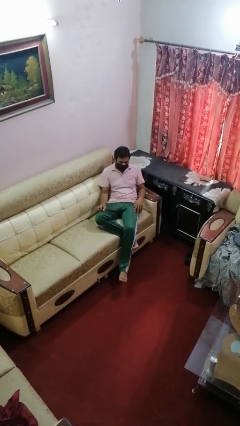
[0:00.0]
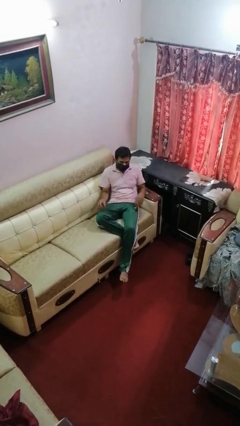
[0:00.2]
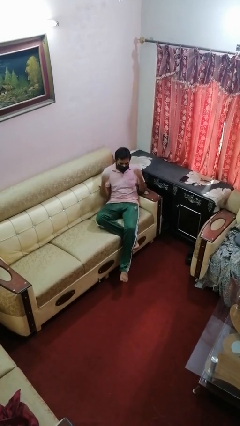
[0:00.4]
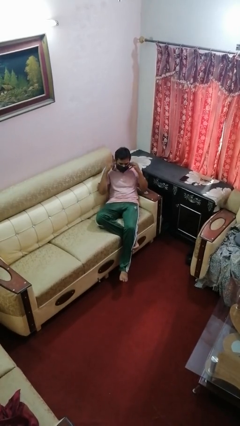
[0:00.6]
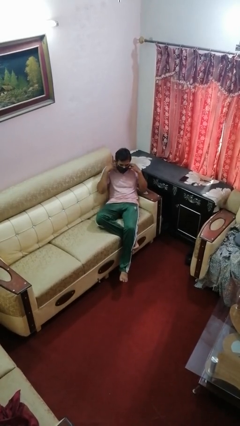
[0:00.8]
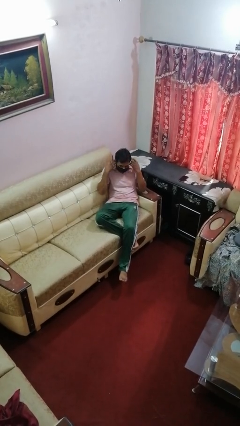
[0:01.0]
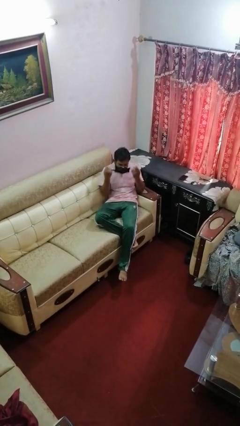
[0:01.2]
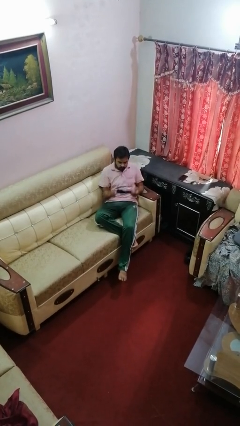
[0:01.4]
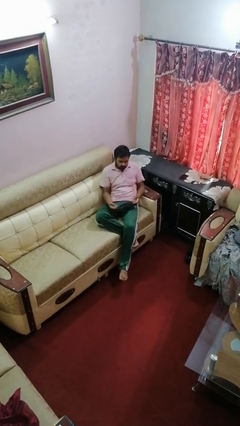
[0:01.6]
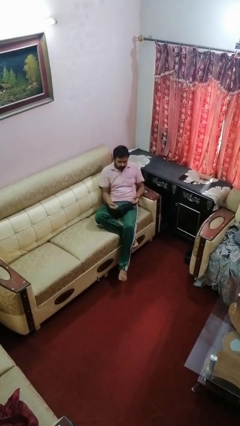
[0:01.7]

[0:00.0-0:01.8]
person takes off facemask

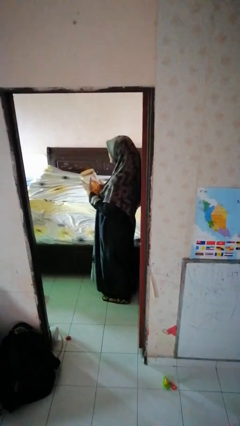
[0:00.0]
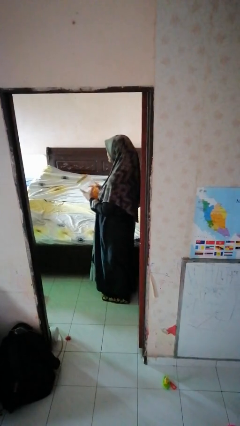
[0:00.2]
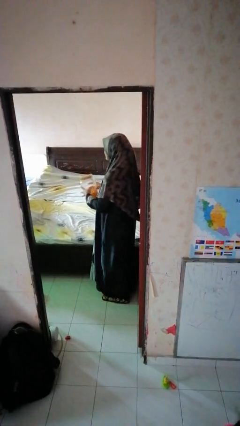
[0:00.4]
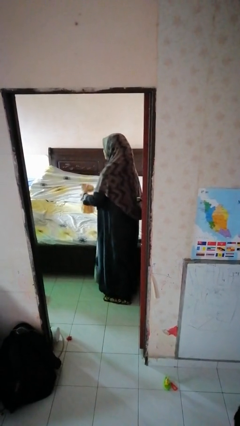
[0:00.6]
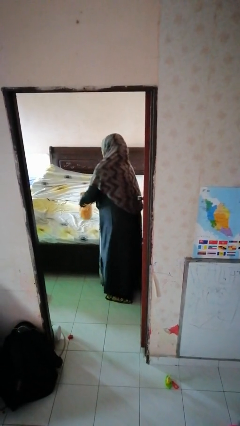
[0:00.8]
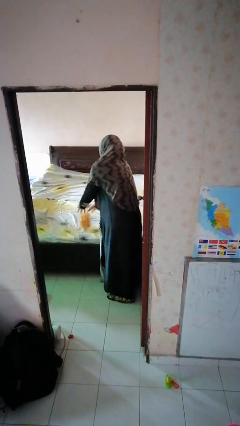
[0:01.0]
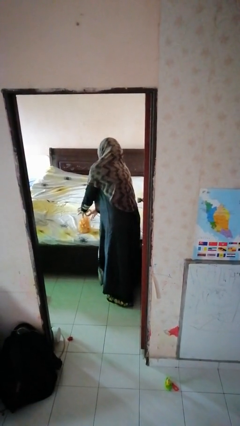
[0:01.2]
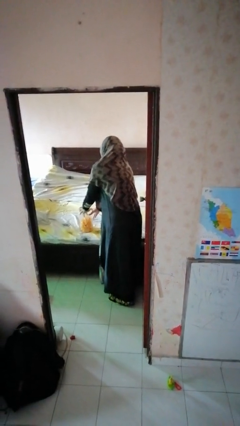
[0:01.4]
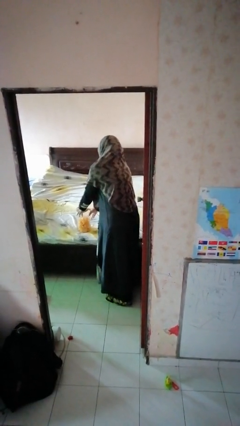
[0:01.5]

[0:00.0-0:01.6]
person puts down object on bed

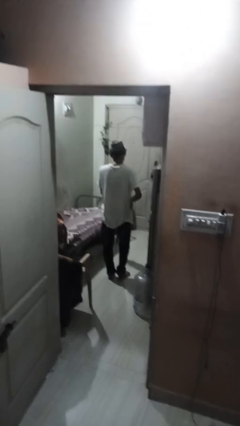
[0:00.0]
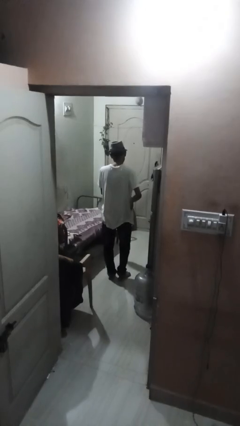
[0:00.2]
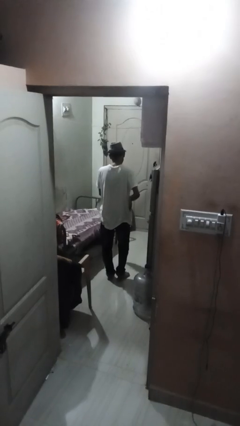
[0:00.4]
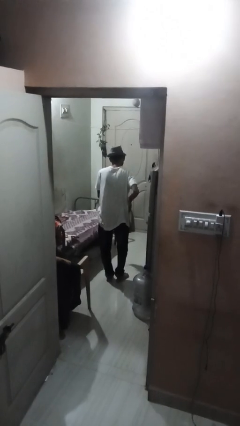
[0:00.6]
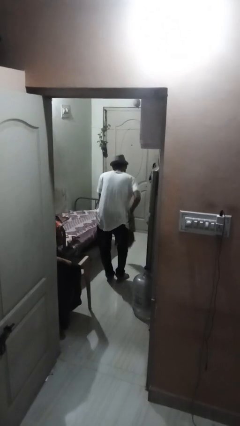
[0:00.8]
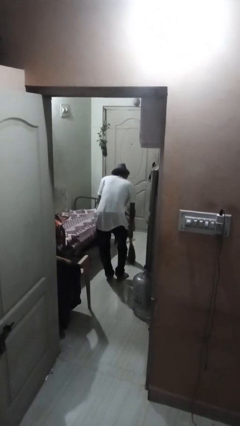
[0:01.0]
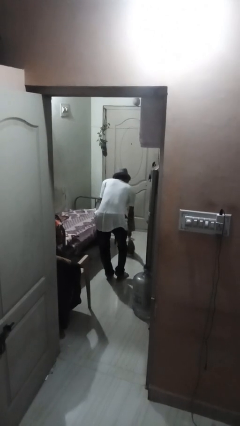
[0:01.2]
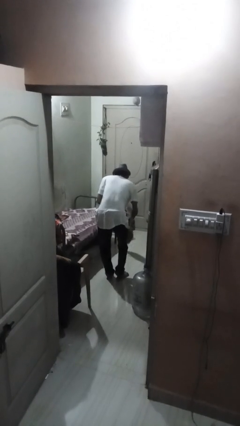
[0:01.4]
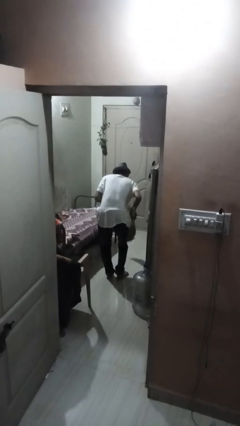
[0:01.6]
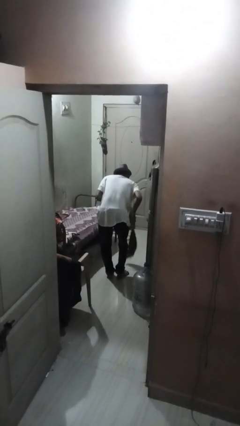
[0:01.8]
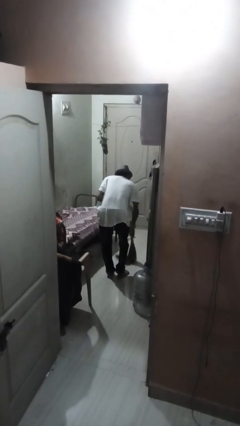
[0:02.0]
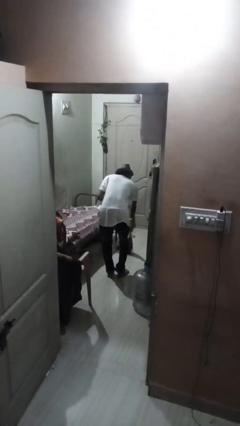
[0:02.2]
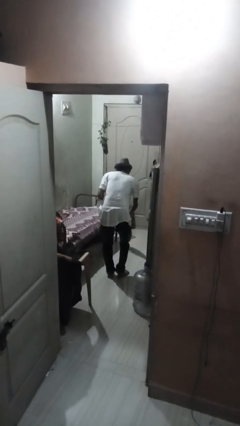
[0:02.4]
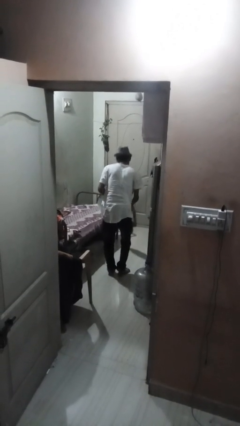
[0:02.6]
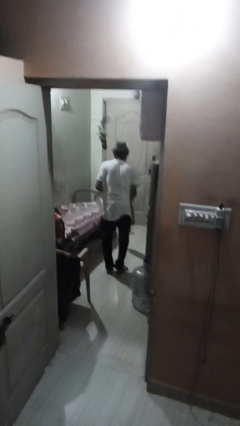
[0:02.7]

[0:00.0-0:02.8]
person mops

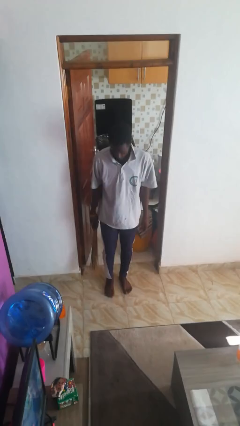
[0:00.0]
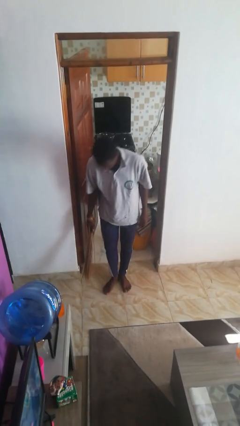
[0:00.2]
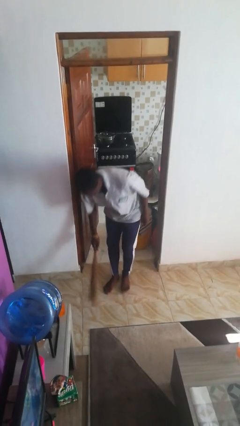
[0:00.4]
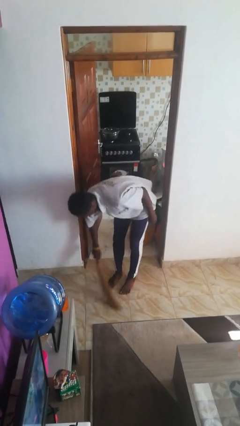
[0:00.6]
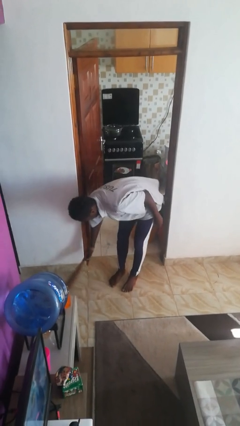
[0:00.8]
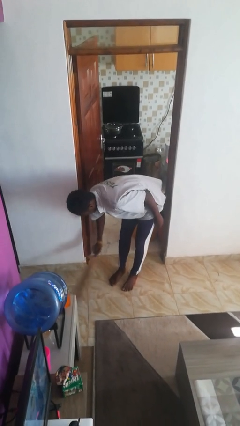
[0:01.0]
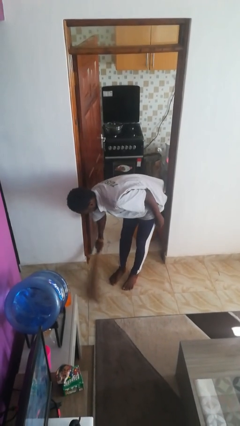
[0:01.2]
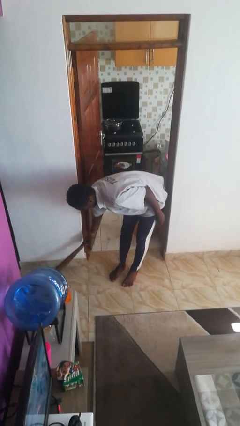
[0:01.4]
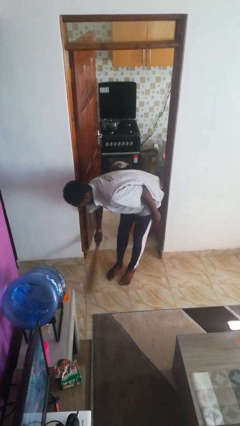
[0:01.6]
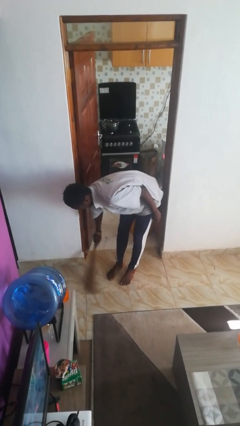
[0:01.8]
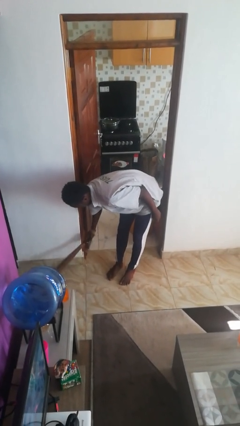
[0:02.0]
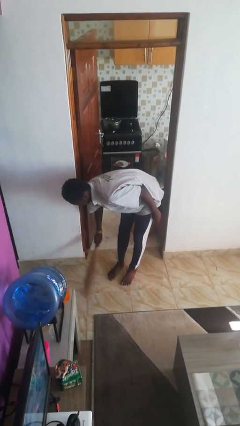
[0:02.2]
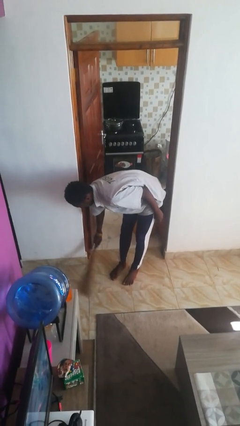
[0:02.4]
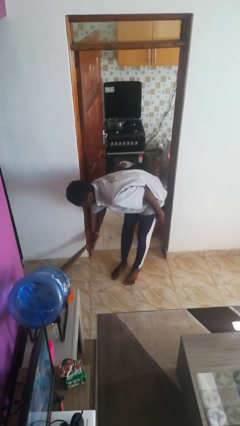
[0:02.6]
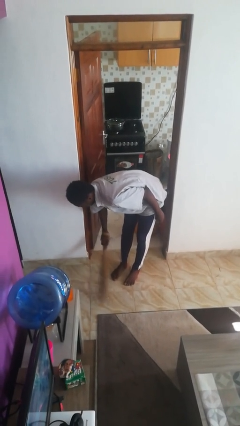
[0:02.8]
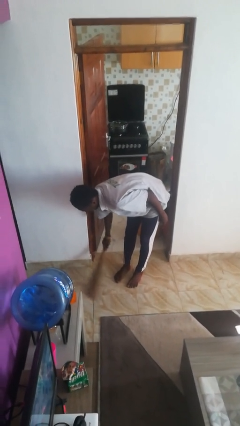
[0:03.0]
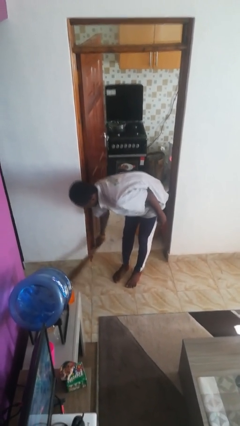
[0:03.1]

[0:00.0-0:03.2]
person sweeps floor

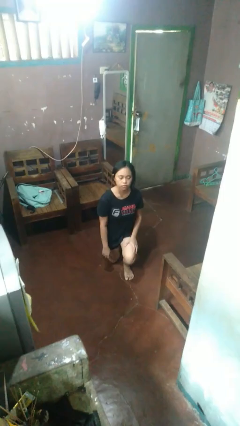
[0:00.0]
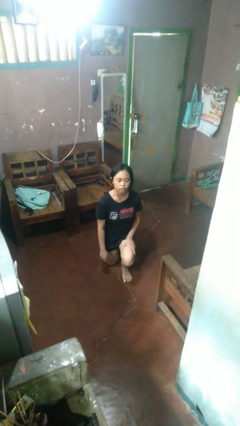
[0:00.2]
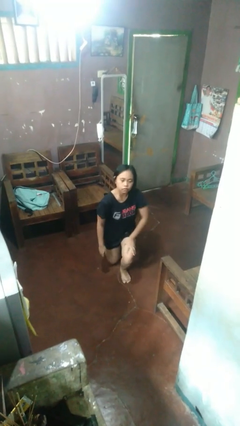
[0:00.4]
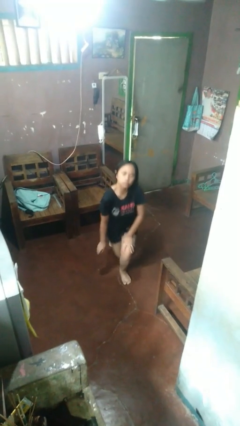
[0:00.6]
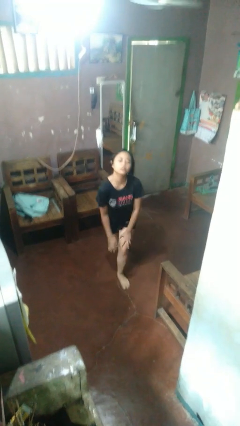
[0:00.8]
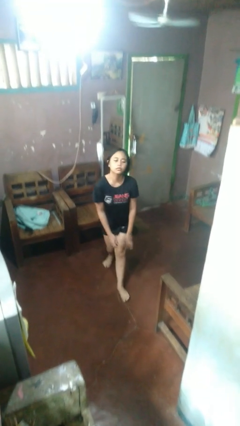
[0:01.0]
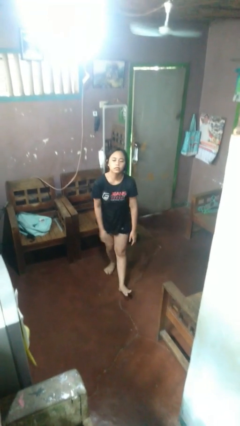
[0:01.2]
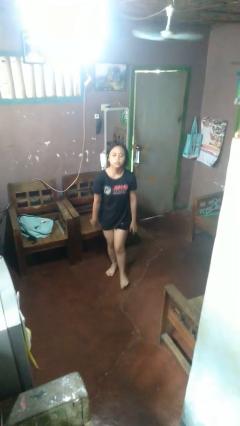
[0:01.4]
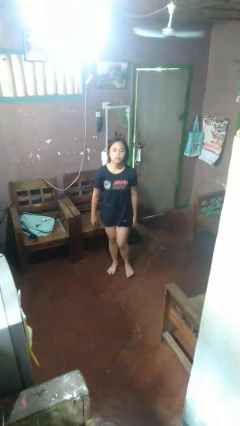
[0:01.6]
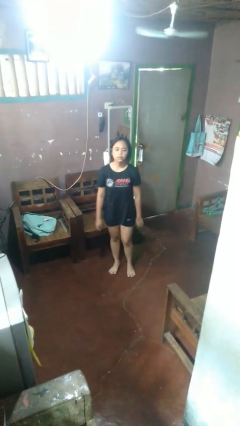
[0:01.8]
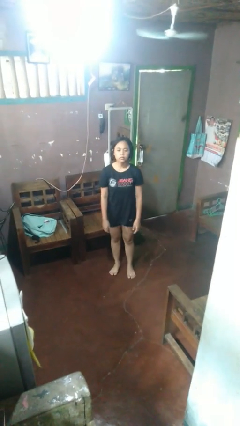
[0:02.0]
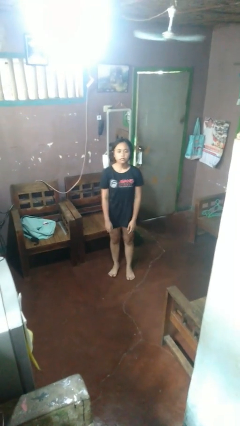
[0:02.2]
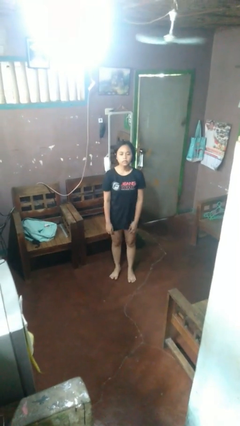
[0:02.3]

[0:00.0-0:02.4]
person stands up from floor

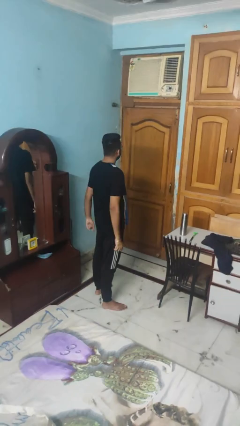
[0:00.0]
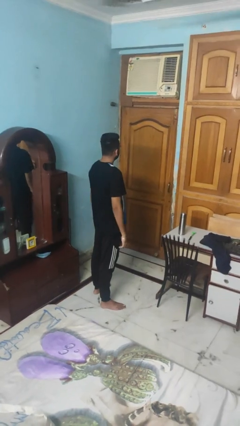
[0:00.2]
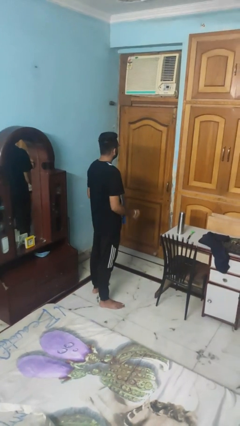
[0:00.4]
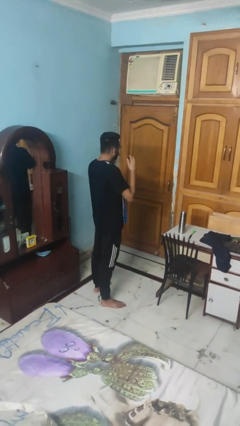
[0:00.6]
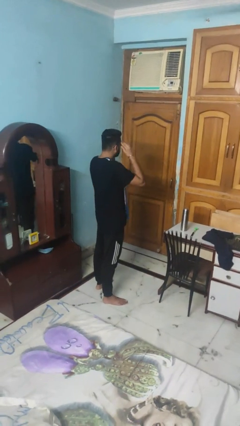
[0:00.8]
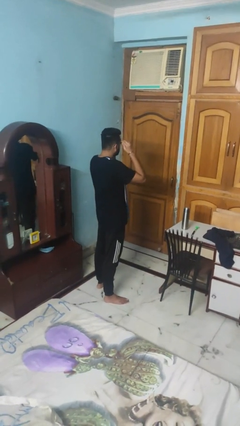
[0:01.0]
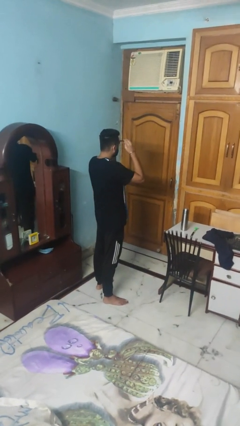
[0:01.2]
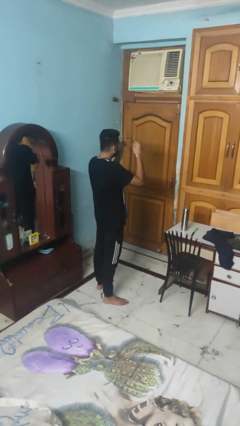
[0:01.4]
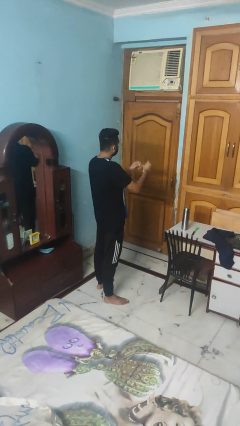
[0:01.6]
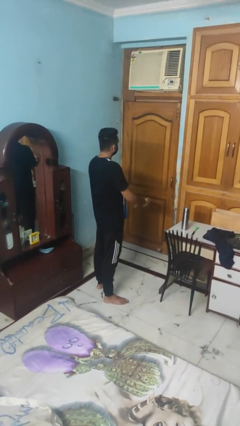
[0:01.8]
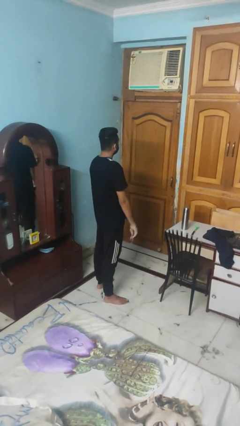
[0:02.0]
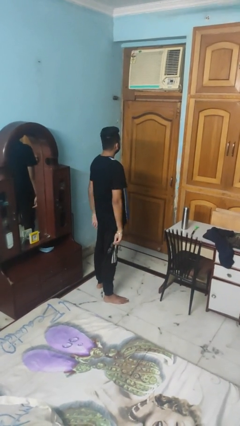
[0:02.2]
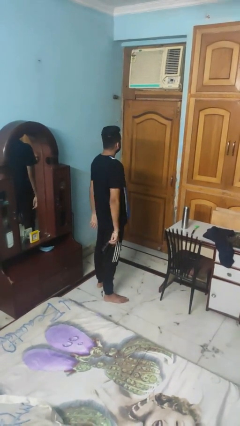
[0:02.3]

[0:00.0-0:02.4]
person takes off glasses

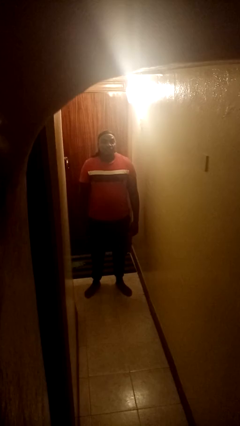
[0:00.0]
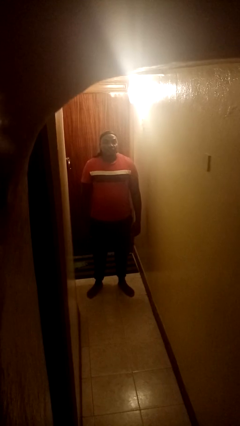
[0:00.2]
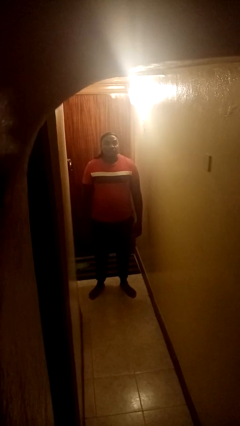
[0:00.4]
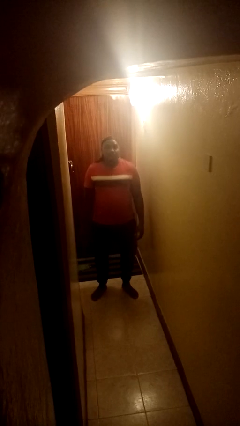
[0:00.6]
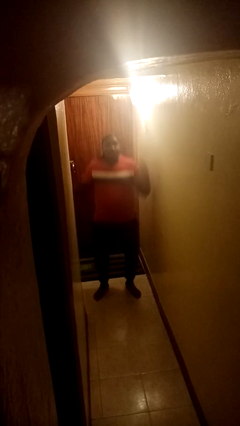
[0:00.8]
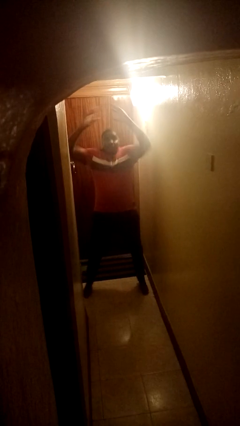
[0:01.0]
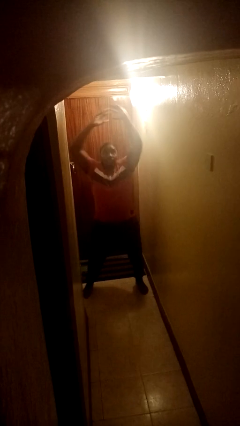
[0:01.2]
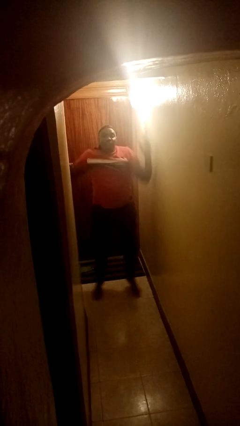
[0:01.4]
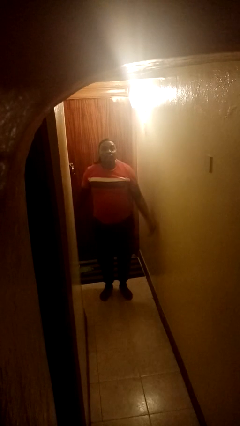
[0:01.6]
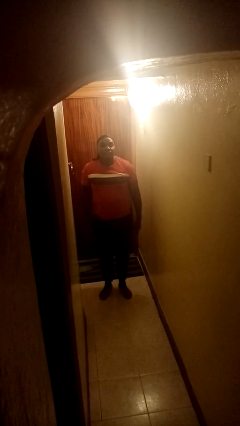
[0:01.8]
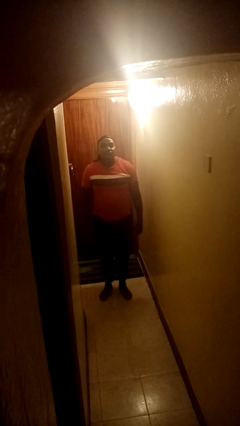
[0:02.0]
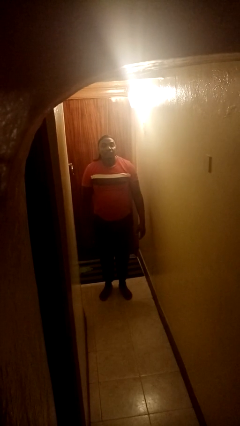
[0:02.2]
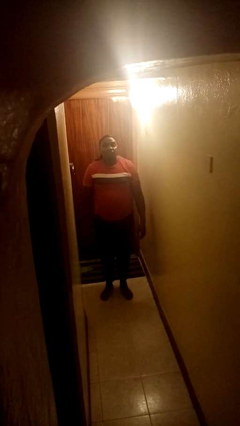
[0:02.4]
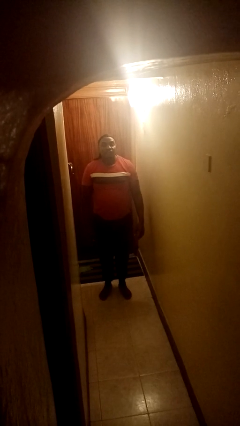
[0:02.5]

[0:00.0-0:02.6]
person exercises with jumping jacks
